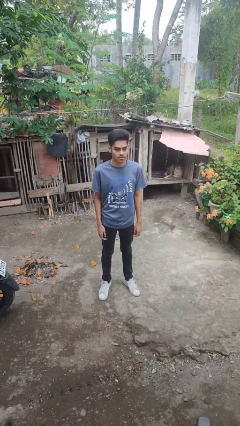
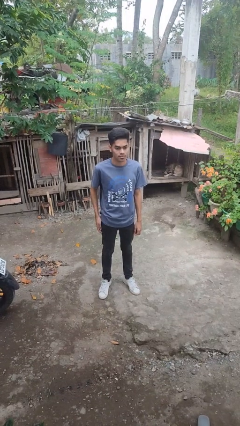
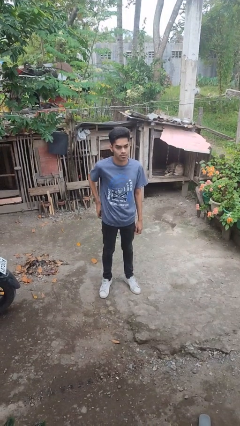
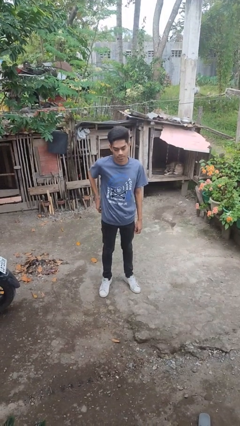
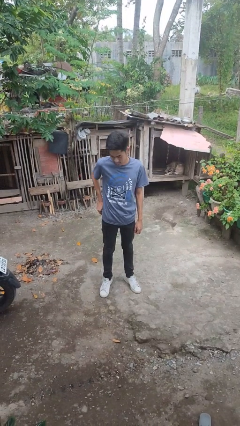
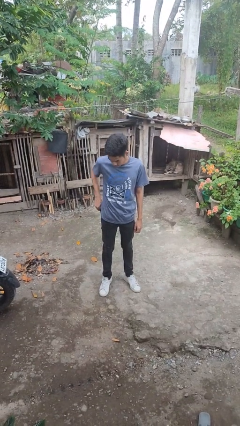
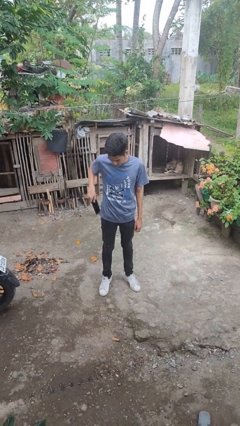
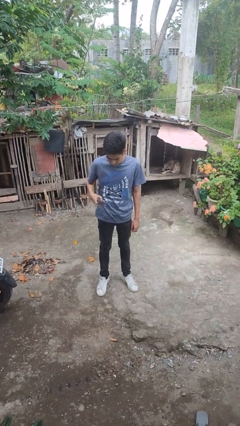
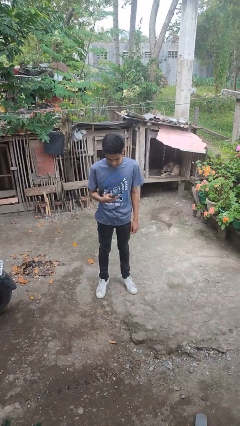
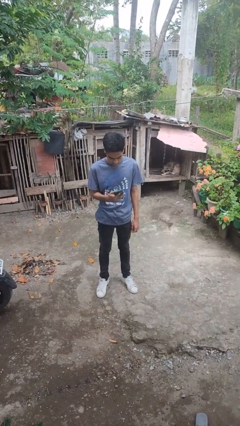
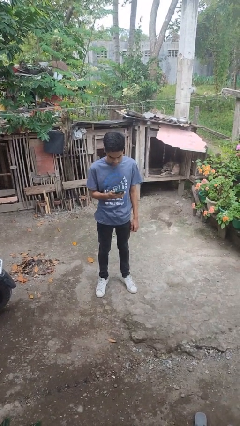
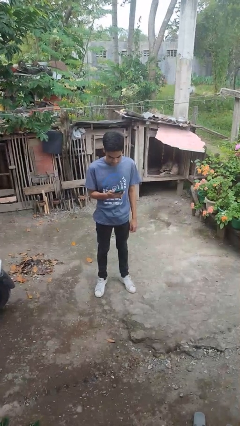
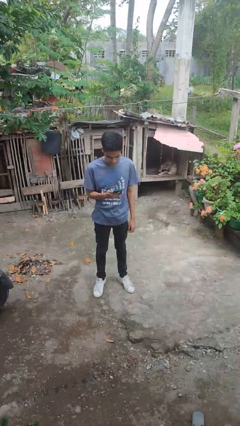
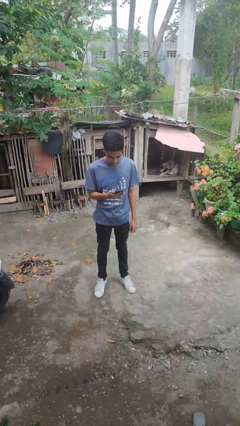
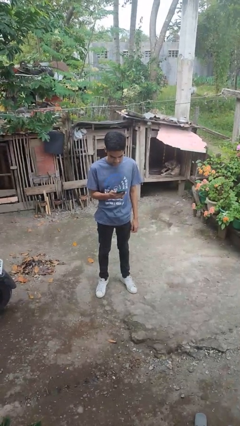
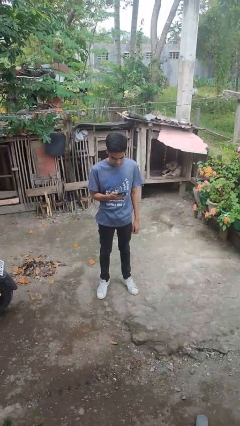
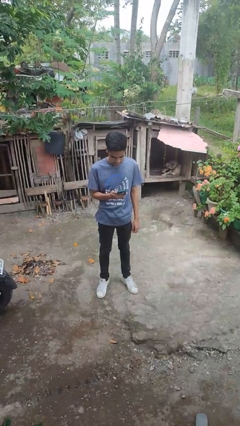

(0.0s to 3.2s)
person takes phone from pocket

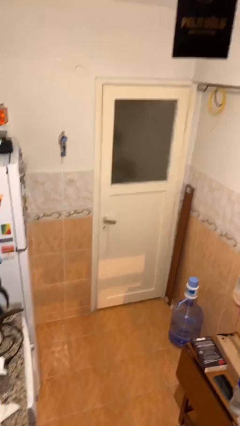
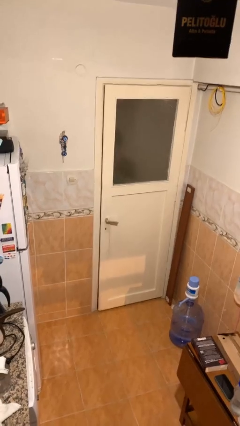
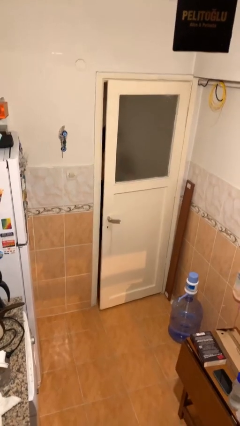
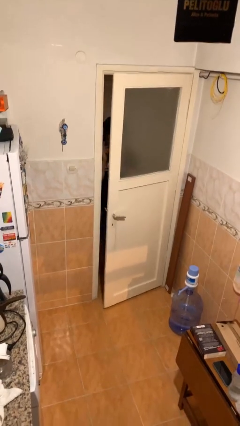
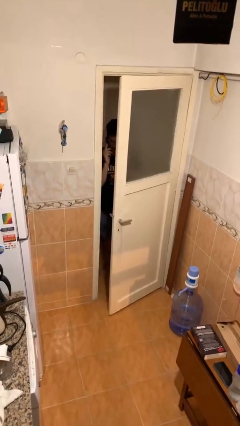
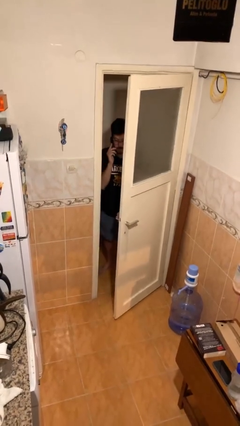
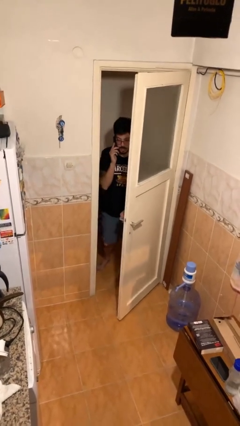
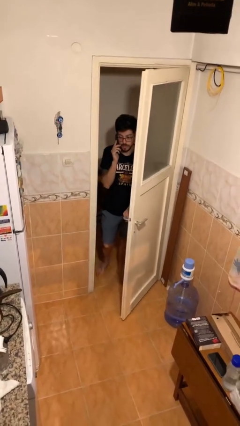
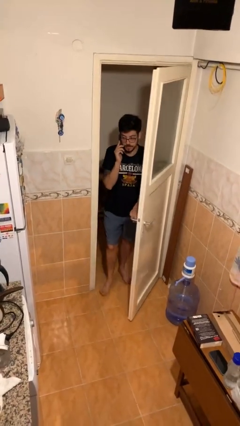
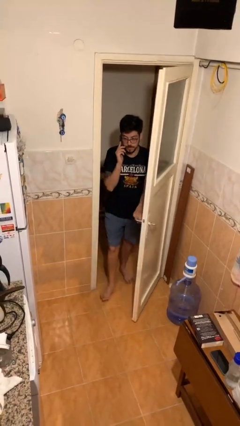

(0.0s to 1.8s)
person opens facility door

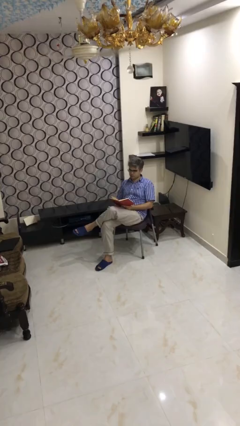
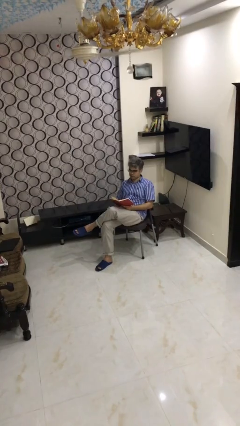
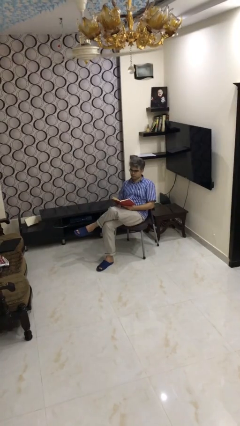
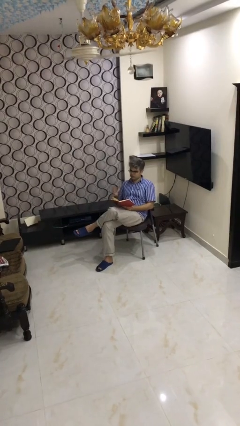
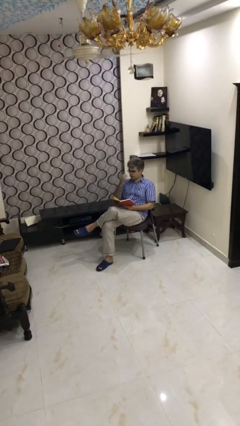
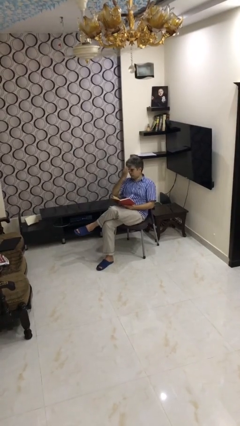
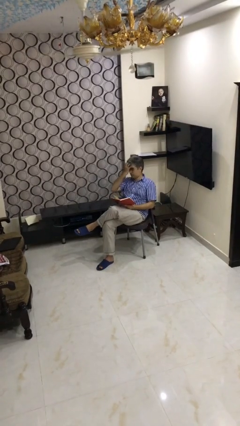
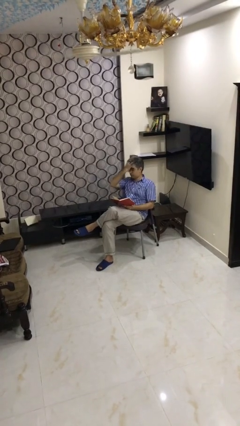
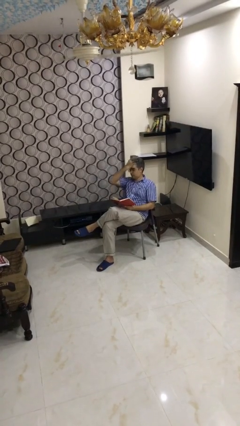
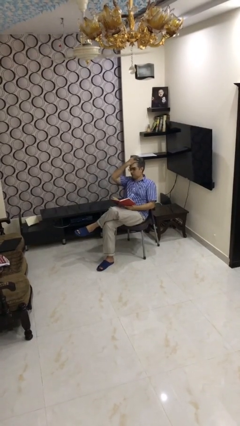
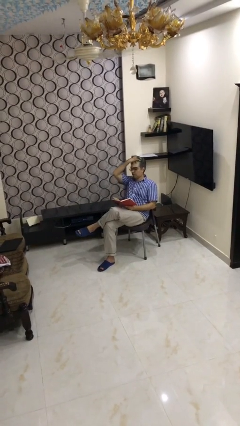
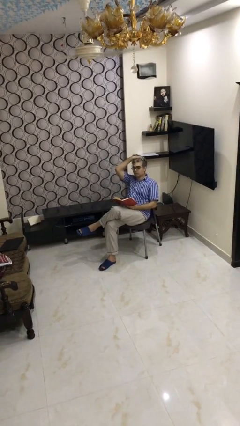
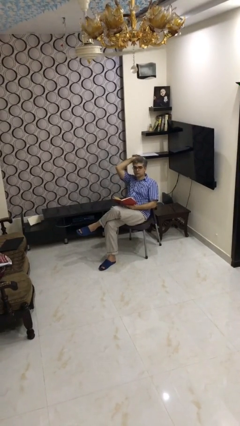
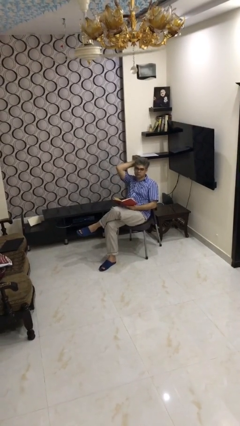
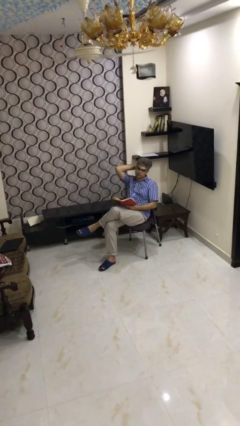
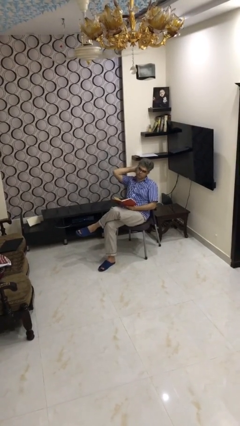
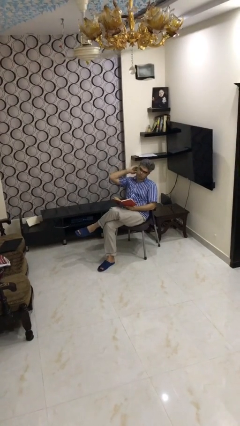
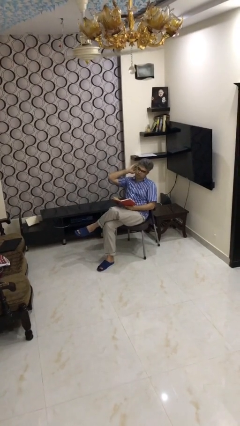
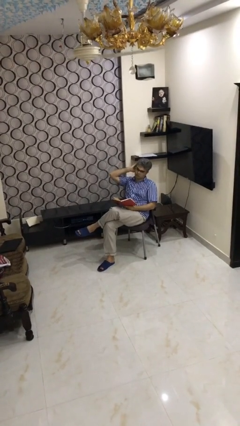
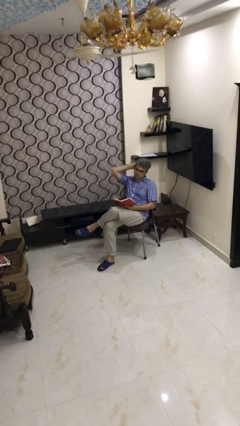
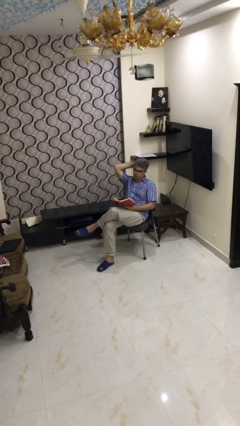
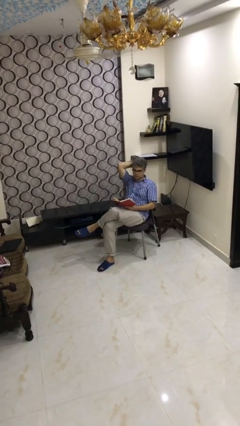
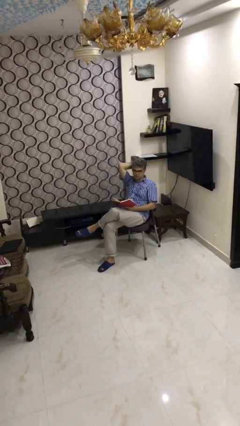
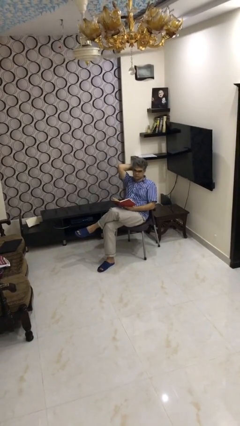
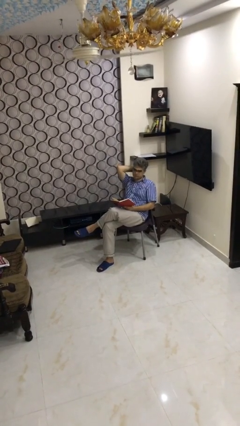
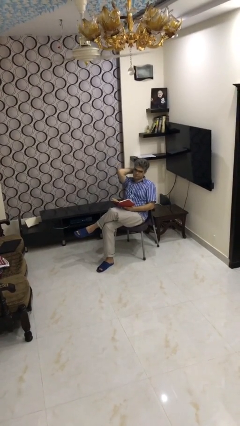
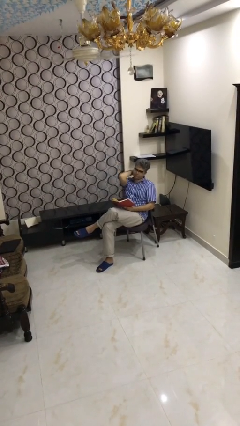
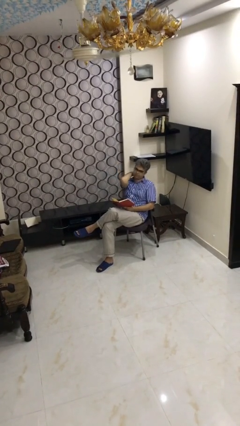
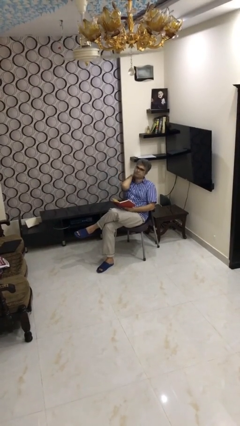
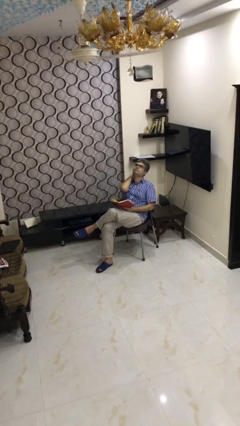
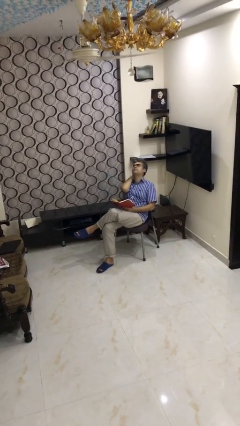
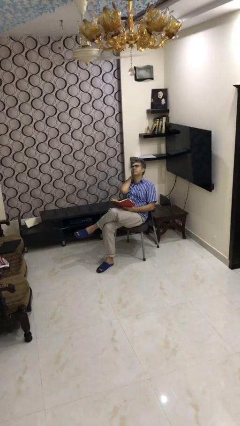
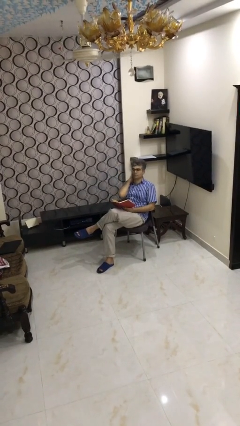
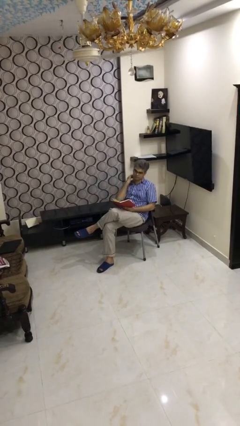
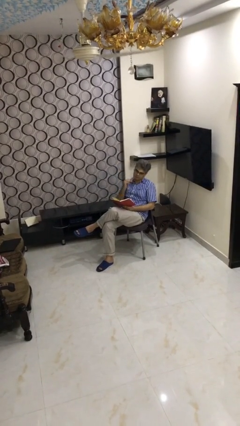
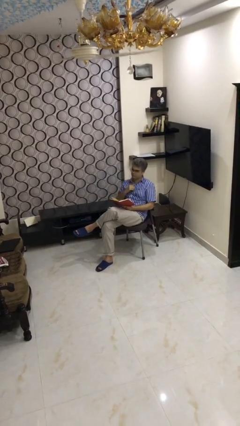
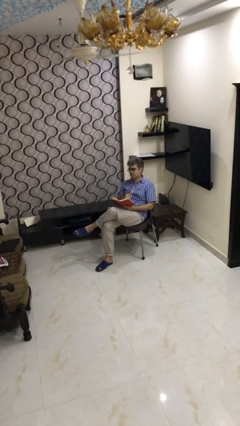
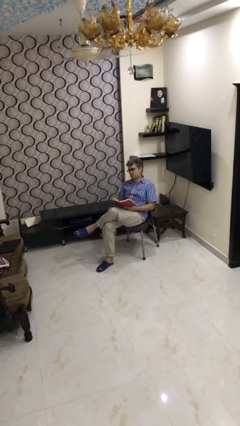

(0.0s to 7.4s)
person reads document

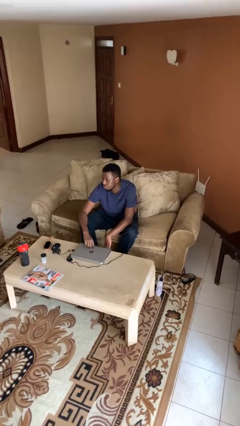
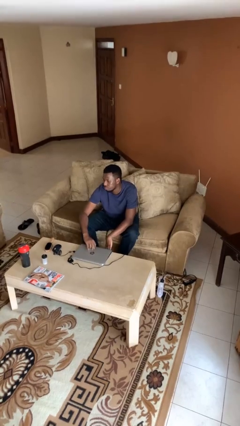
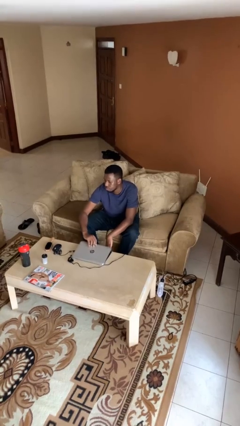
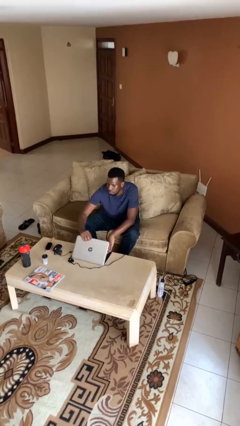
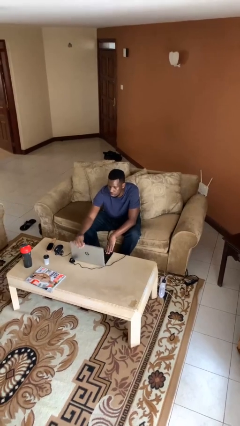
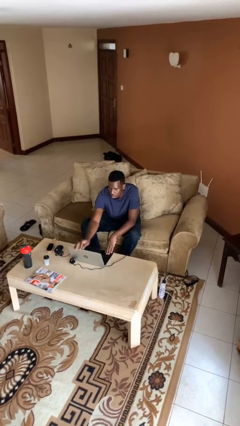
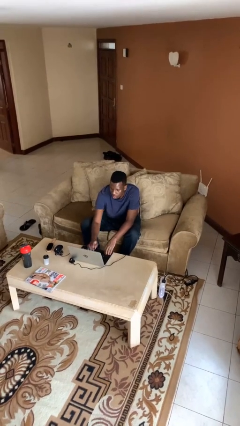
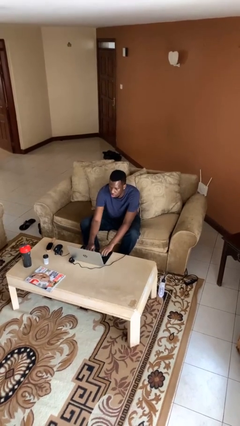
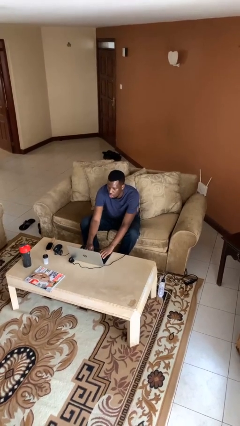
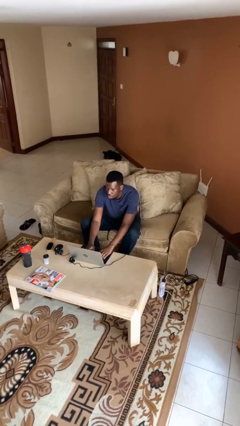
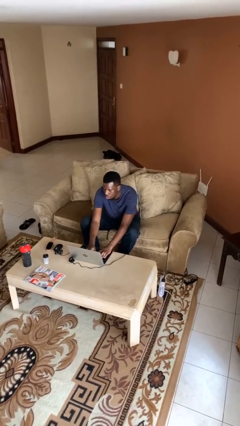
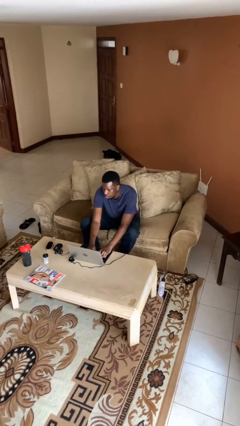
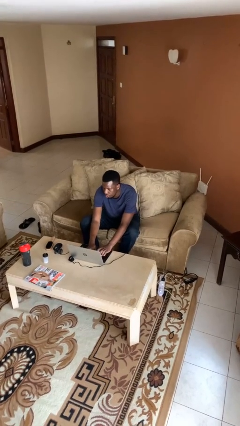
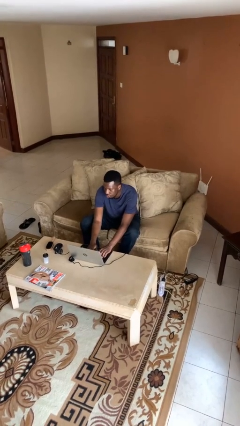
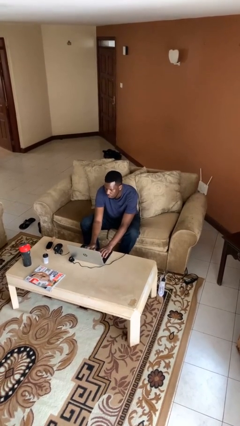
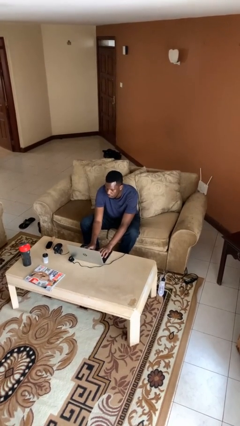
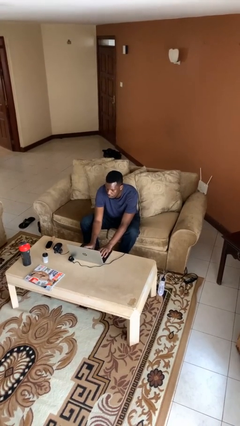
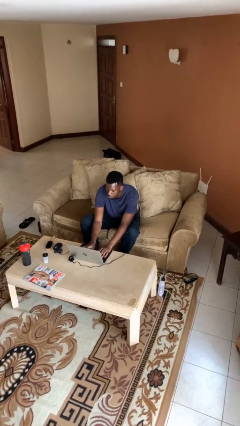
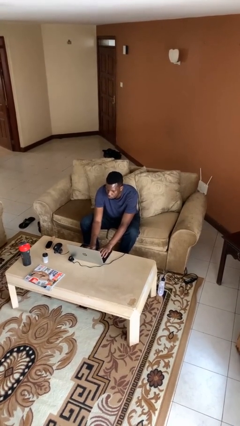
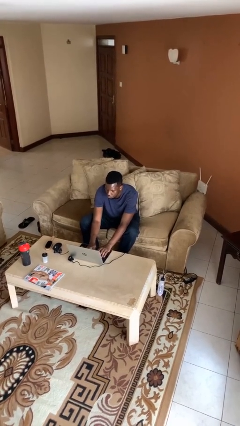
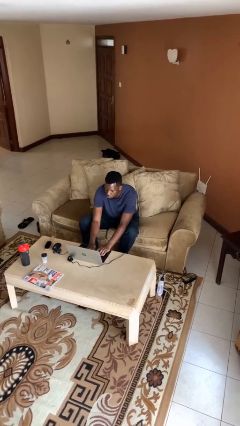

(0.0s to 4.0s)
person interacts with laptop

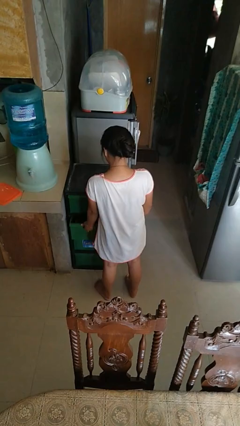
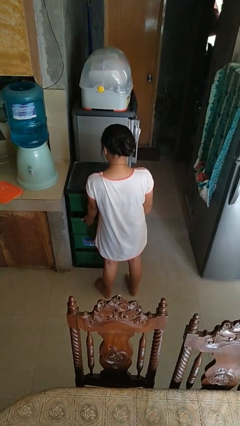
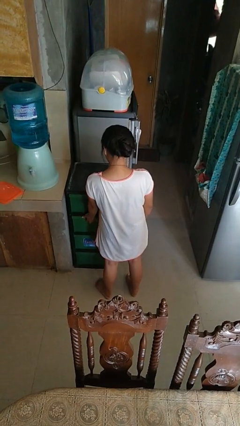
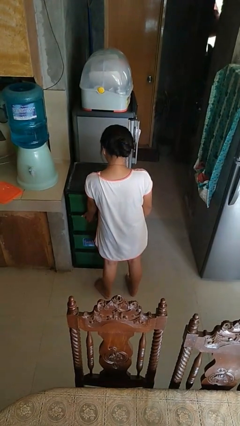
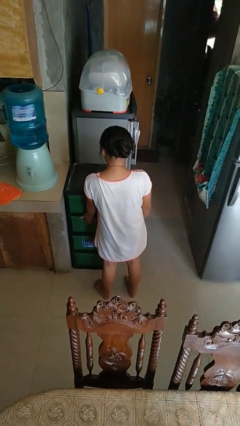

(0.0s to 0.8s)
person closes kitchen drawer

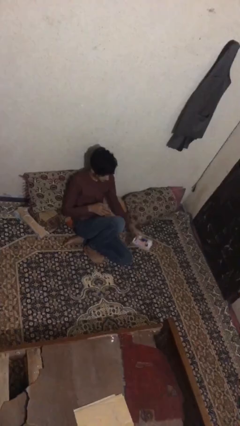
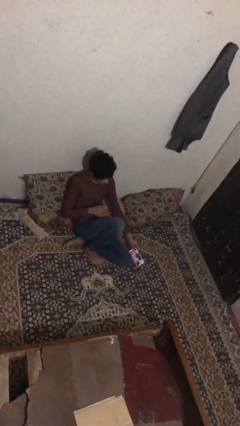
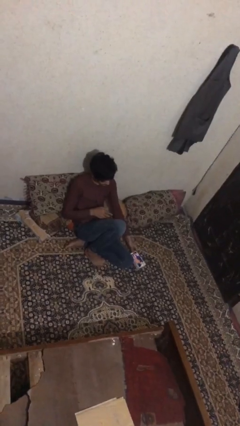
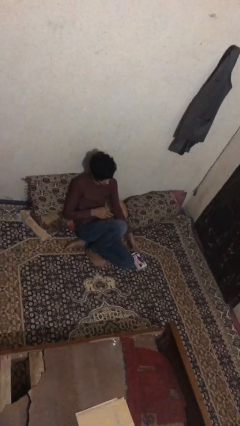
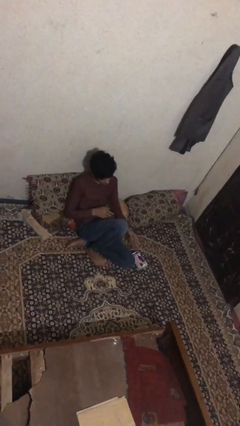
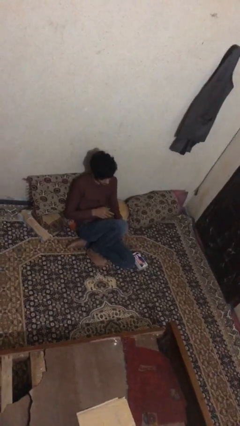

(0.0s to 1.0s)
person puts down object on floor
